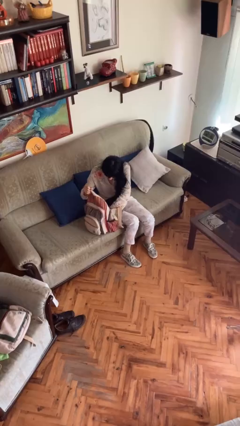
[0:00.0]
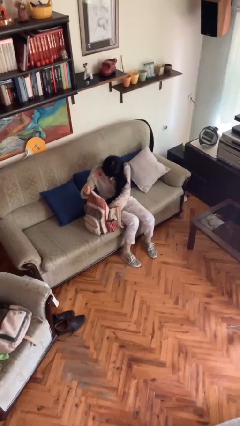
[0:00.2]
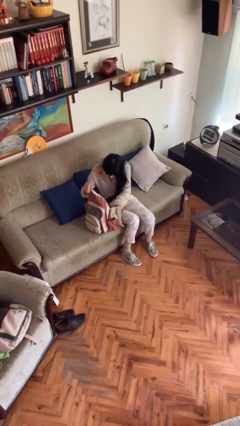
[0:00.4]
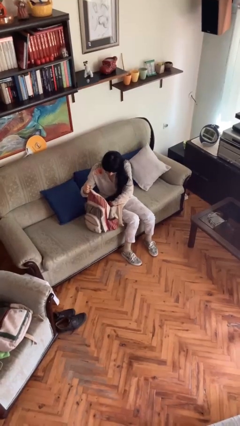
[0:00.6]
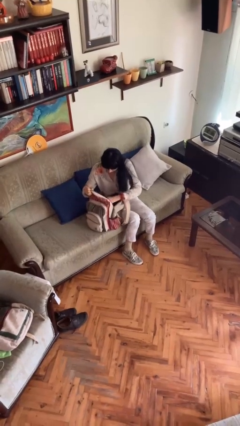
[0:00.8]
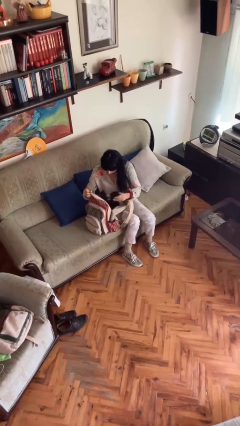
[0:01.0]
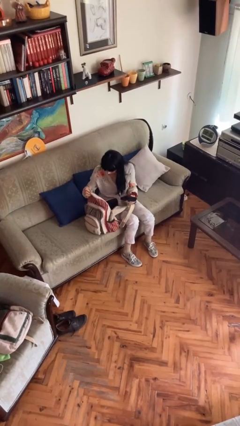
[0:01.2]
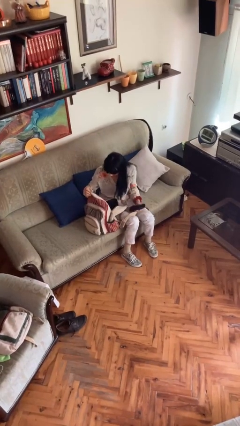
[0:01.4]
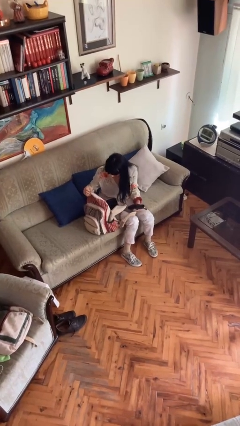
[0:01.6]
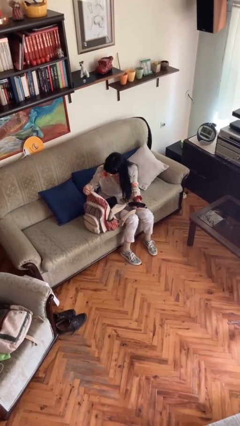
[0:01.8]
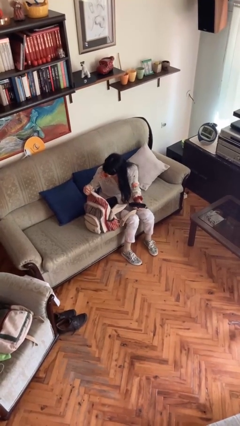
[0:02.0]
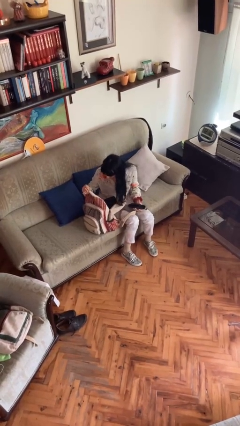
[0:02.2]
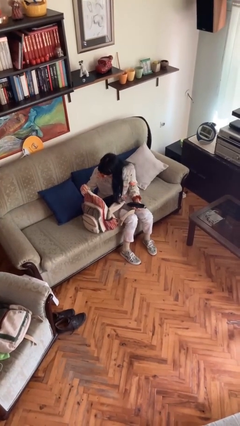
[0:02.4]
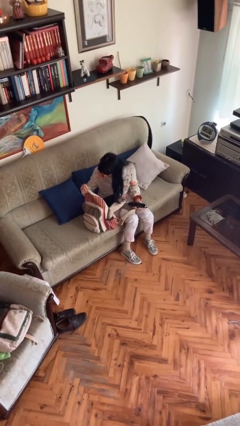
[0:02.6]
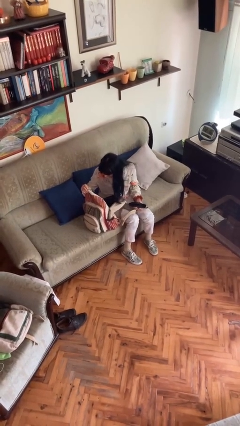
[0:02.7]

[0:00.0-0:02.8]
person takes object from backpack

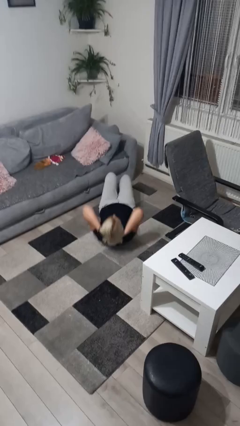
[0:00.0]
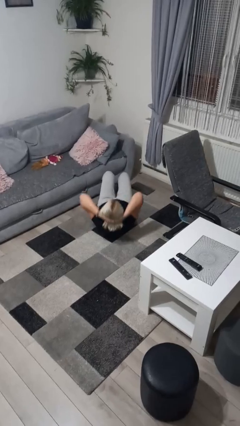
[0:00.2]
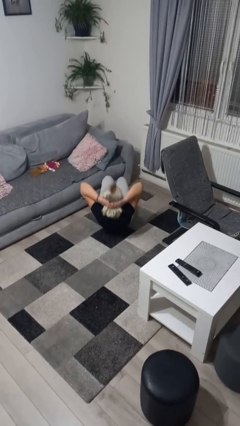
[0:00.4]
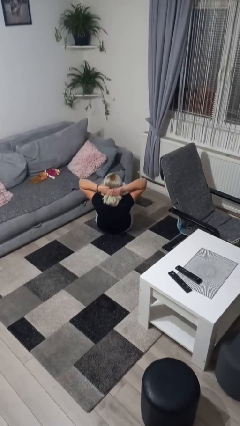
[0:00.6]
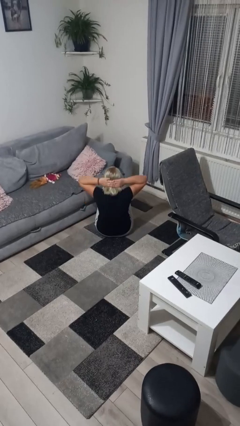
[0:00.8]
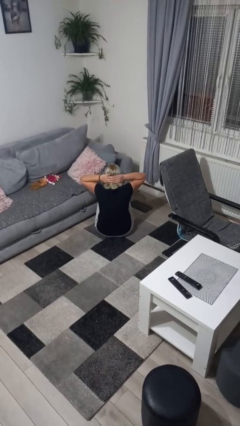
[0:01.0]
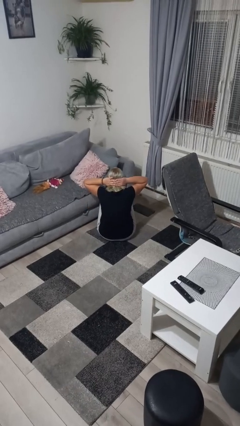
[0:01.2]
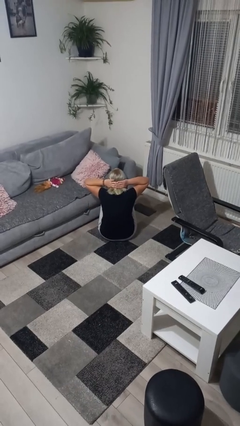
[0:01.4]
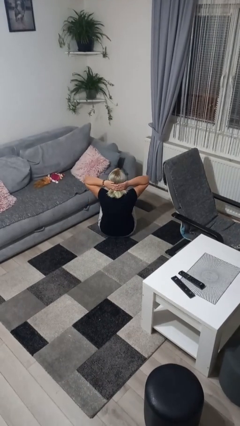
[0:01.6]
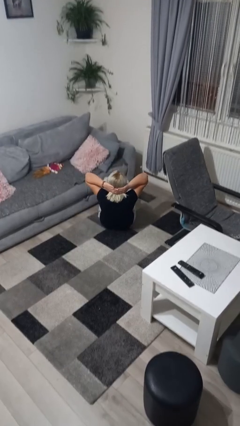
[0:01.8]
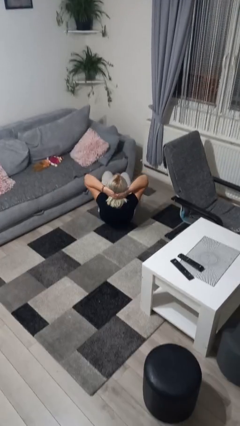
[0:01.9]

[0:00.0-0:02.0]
person exercises with situp

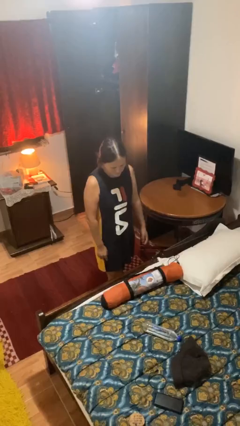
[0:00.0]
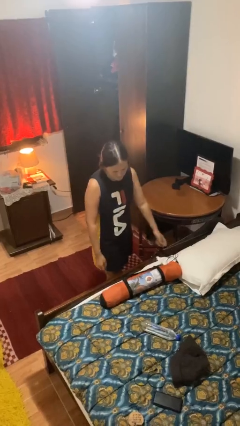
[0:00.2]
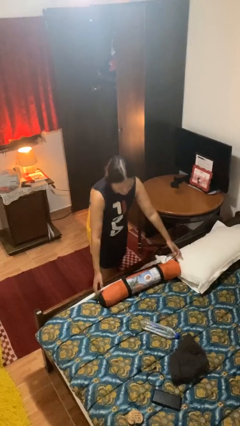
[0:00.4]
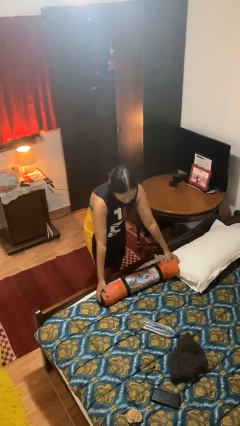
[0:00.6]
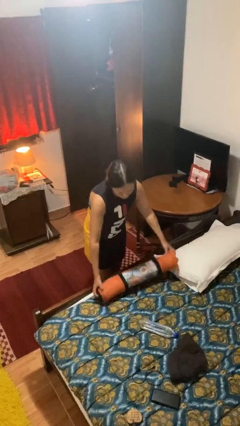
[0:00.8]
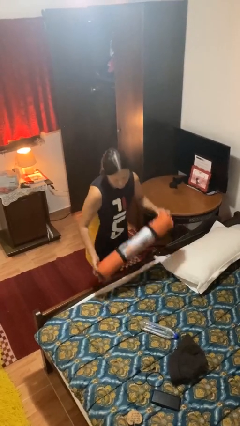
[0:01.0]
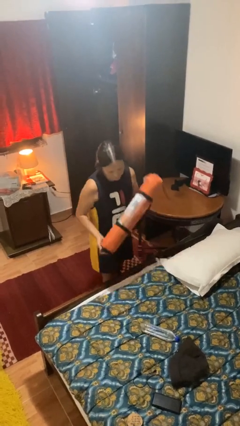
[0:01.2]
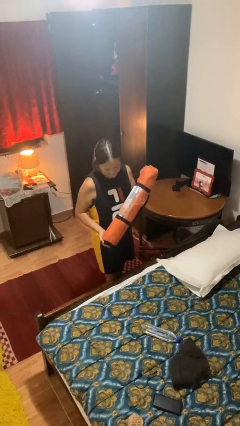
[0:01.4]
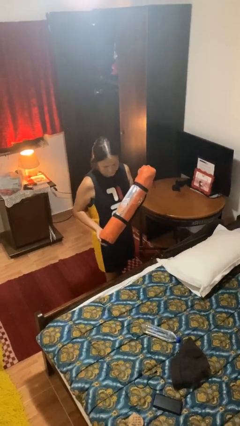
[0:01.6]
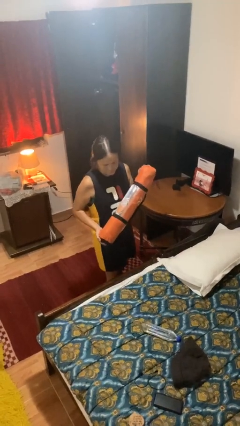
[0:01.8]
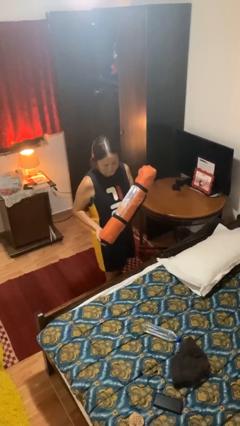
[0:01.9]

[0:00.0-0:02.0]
person picks up object from bed

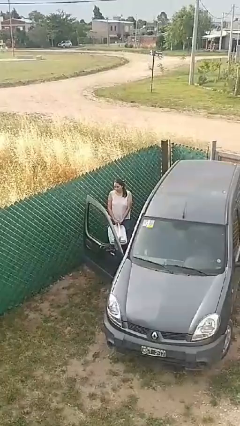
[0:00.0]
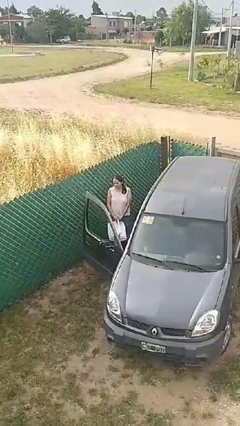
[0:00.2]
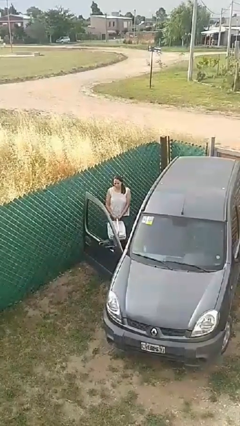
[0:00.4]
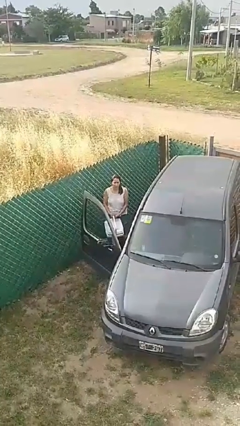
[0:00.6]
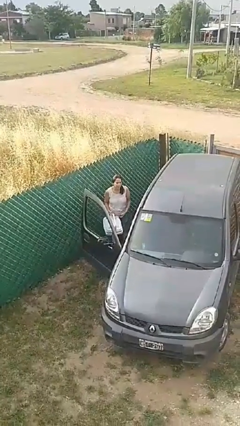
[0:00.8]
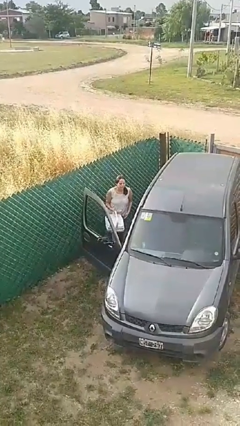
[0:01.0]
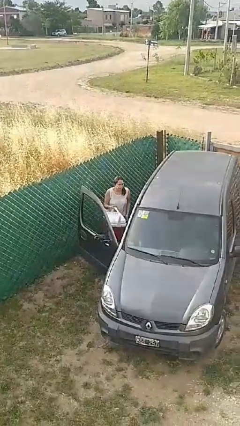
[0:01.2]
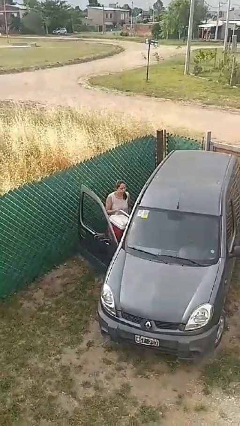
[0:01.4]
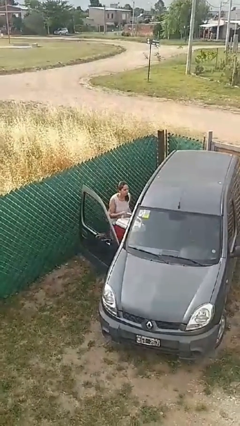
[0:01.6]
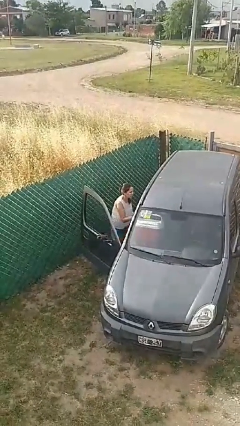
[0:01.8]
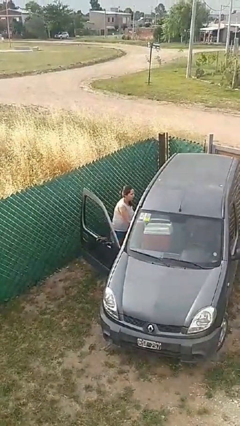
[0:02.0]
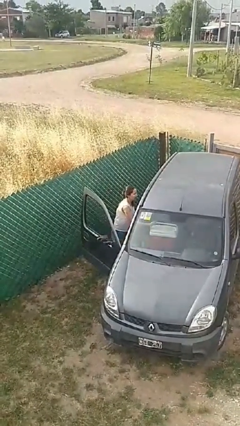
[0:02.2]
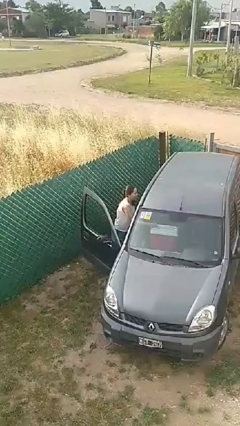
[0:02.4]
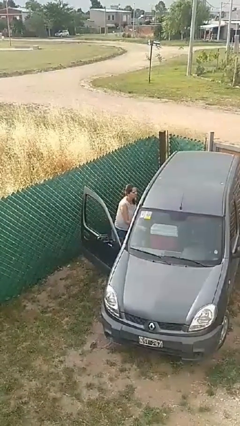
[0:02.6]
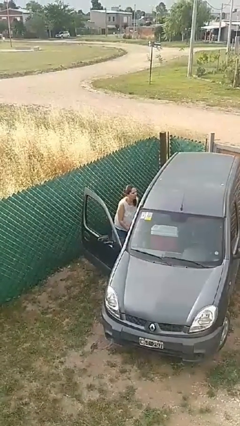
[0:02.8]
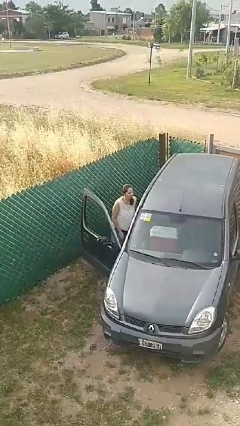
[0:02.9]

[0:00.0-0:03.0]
person loads car

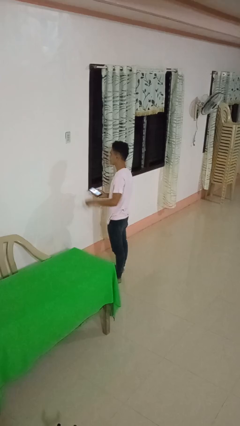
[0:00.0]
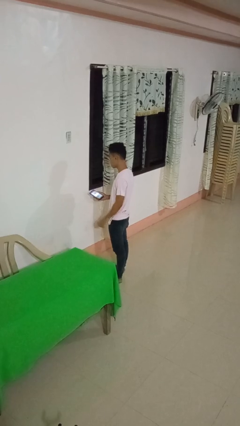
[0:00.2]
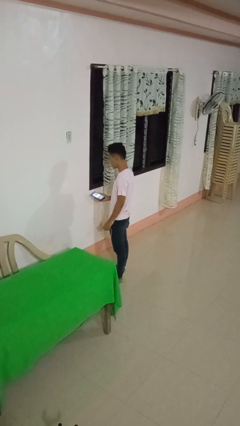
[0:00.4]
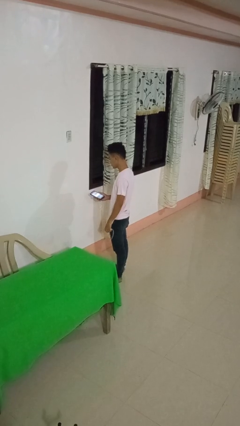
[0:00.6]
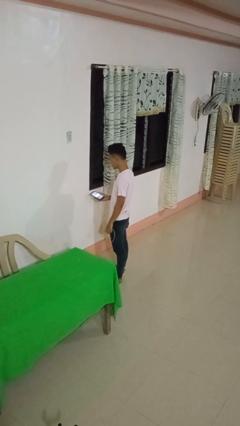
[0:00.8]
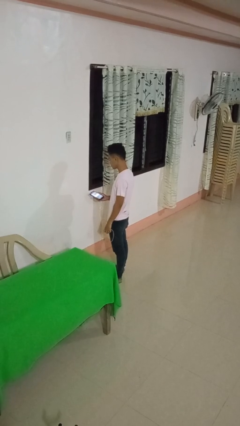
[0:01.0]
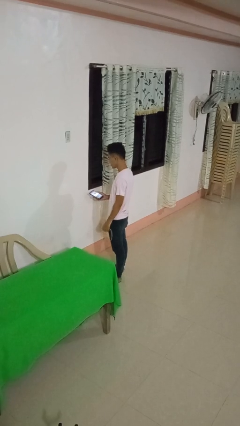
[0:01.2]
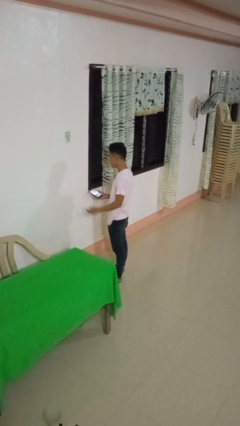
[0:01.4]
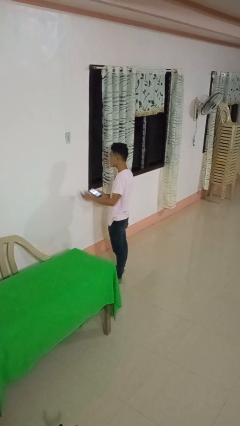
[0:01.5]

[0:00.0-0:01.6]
person unplugs from electrical socket

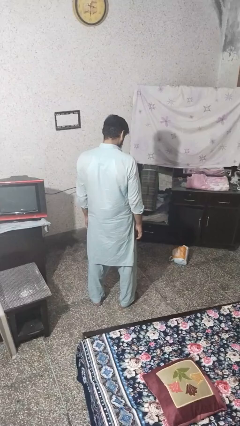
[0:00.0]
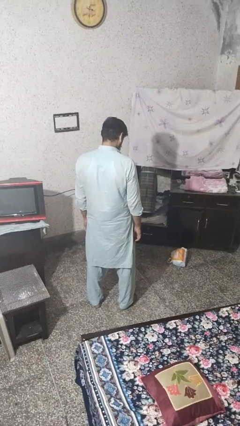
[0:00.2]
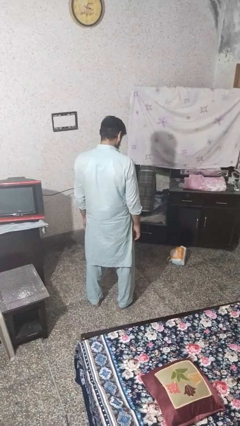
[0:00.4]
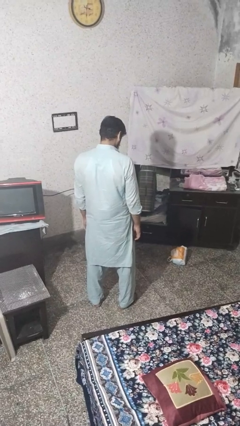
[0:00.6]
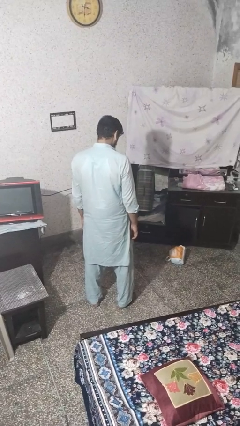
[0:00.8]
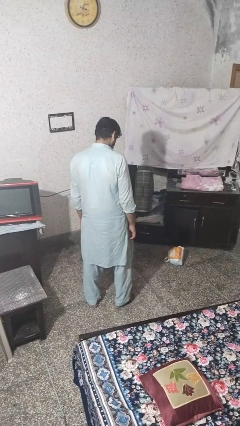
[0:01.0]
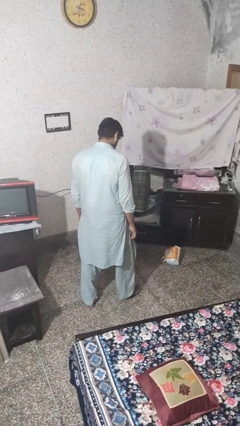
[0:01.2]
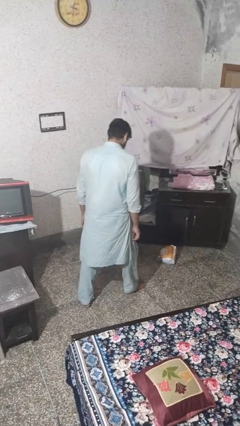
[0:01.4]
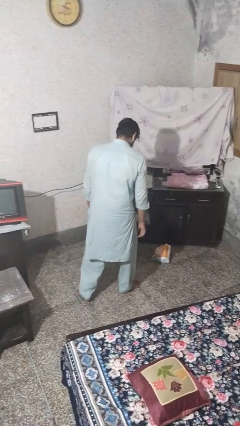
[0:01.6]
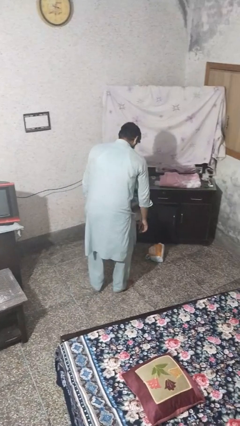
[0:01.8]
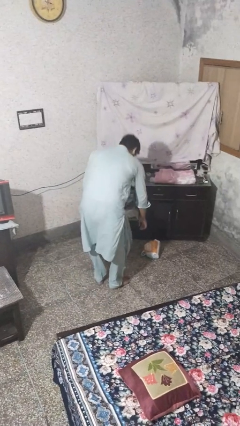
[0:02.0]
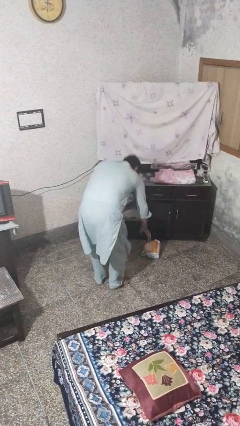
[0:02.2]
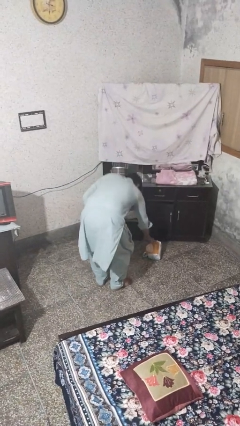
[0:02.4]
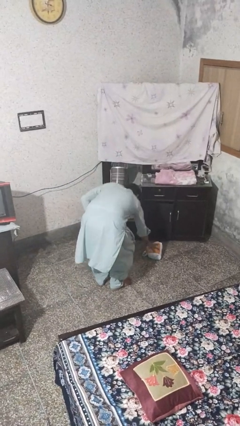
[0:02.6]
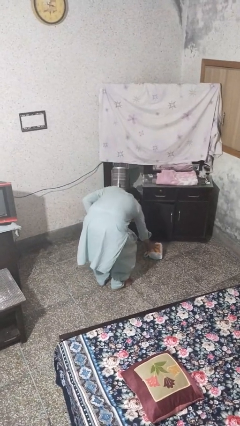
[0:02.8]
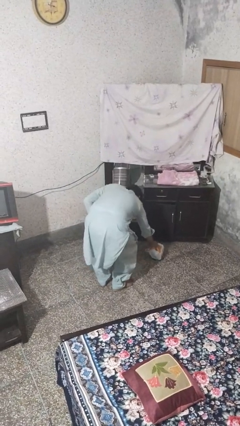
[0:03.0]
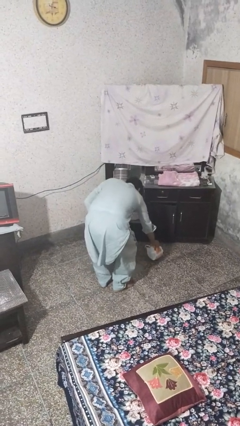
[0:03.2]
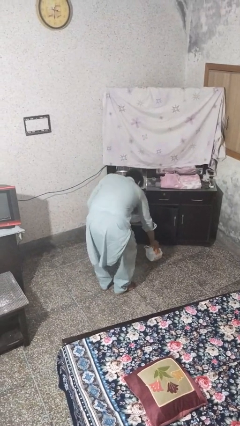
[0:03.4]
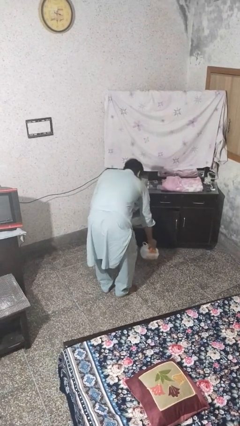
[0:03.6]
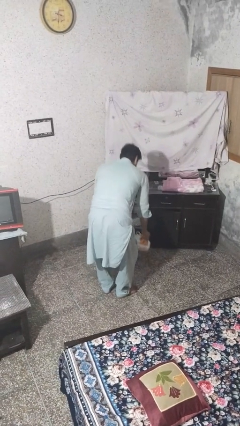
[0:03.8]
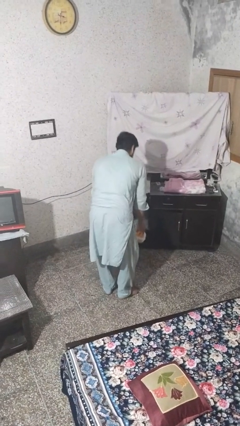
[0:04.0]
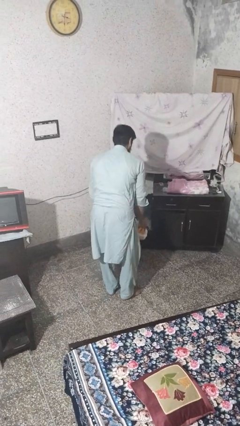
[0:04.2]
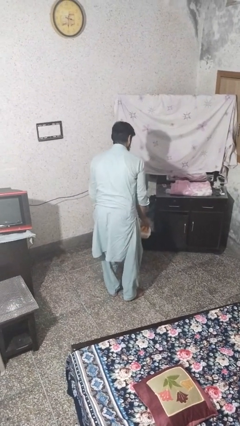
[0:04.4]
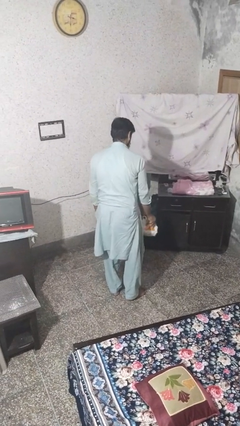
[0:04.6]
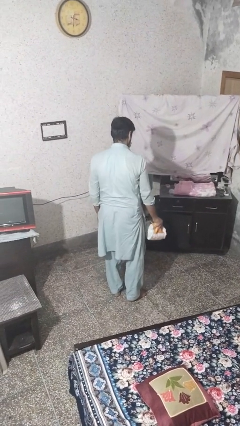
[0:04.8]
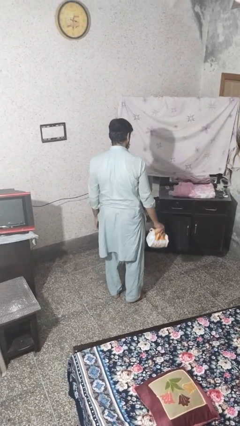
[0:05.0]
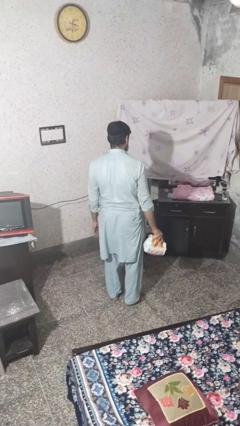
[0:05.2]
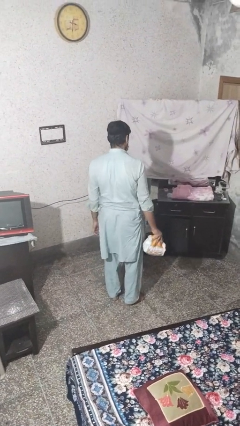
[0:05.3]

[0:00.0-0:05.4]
person picks up object from floor

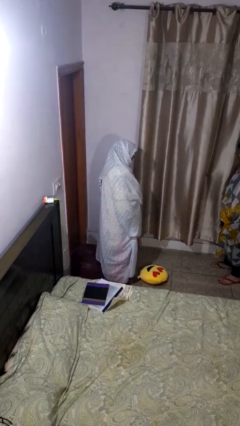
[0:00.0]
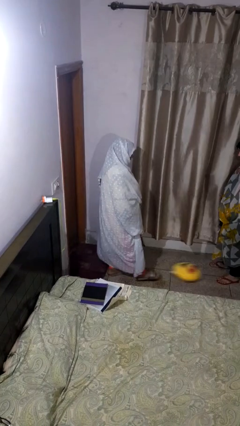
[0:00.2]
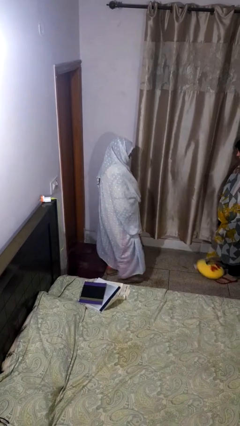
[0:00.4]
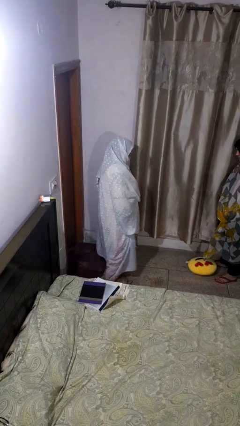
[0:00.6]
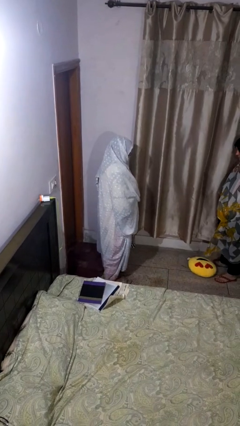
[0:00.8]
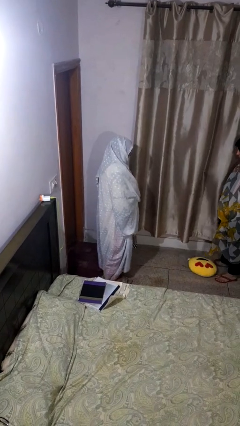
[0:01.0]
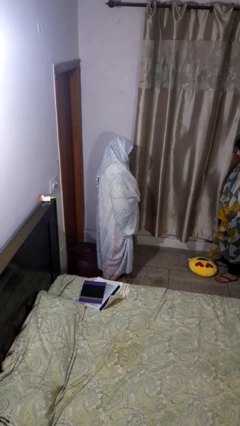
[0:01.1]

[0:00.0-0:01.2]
person kicks object to person
